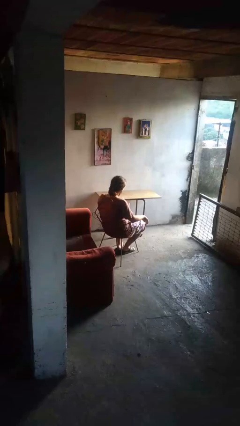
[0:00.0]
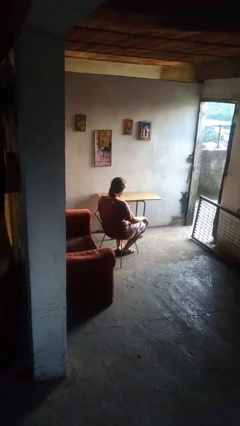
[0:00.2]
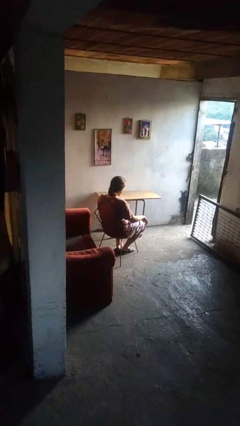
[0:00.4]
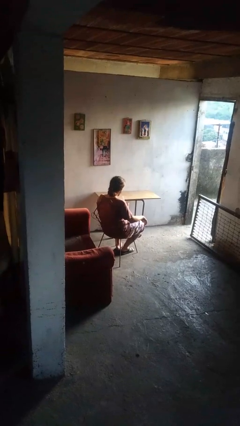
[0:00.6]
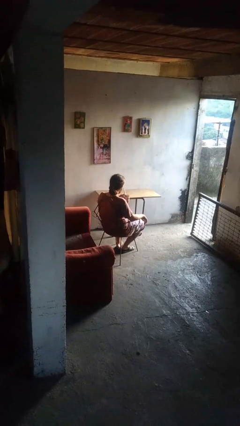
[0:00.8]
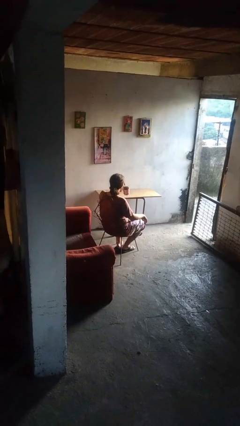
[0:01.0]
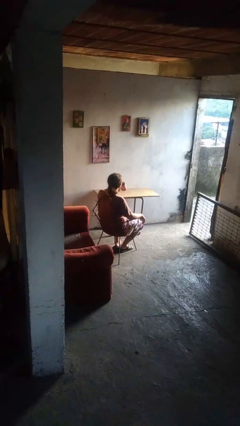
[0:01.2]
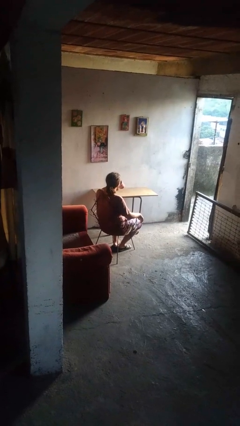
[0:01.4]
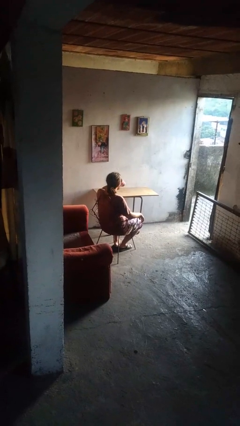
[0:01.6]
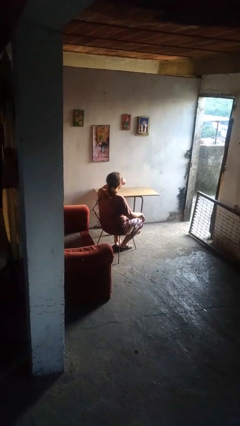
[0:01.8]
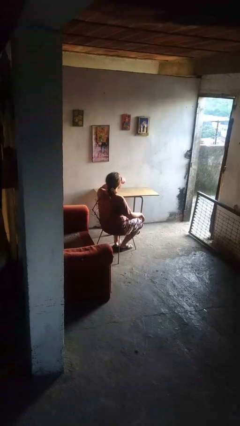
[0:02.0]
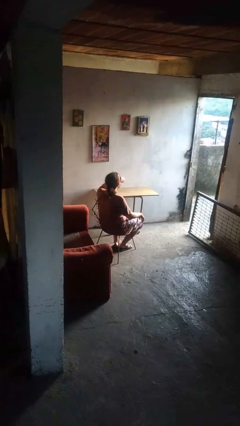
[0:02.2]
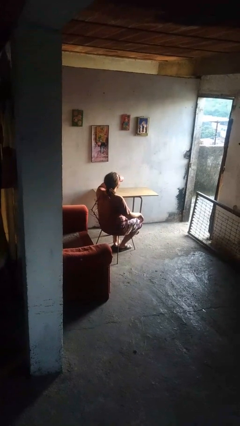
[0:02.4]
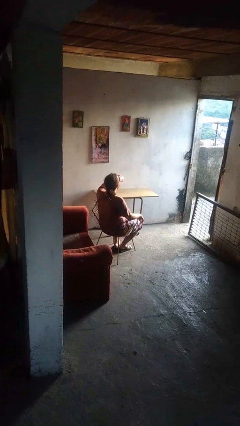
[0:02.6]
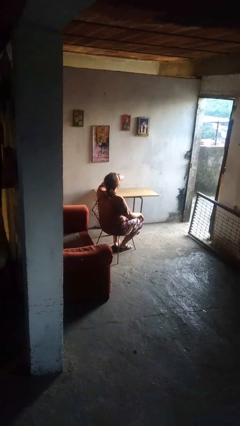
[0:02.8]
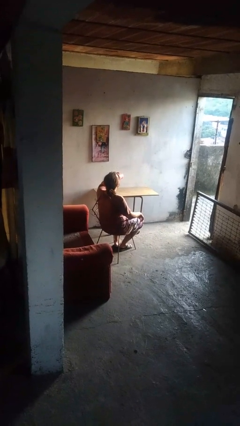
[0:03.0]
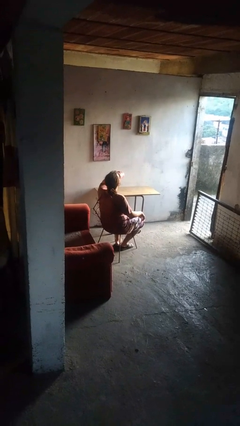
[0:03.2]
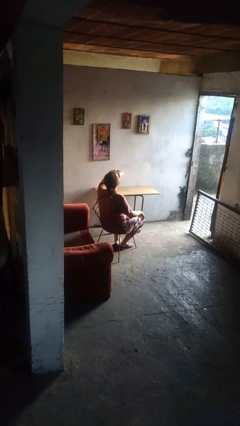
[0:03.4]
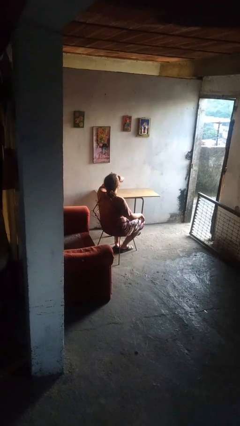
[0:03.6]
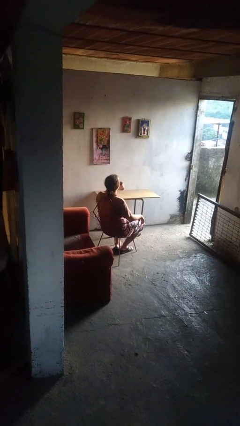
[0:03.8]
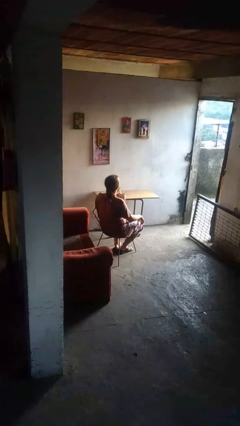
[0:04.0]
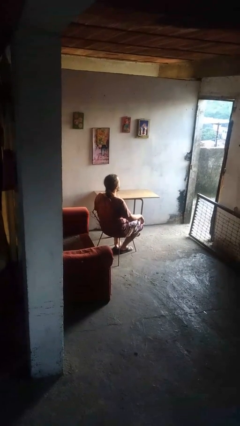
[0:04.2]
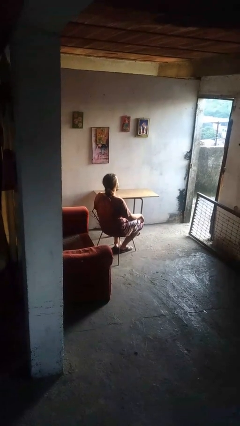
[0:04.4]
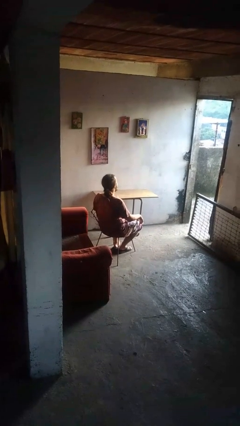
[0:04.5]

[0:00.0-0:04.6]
person drinks from mug

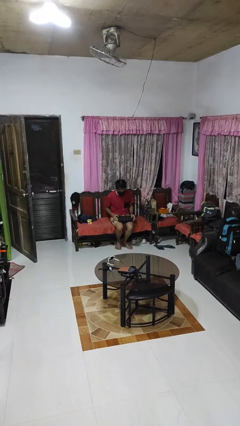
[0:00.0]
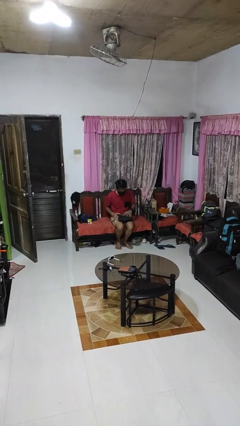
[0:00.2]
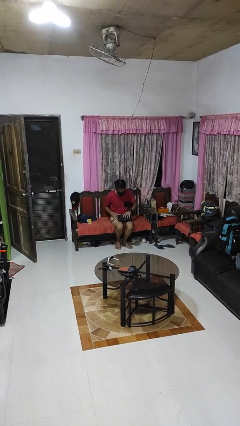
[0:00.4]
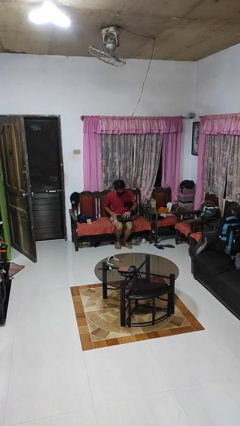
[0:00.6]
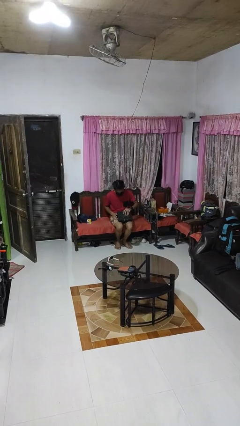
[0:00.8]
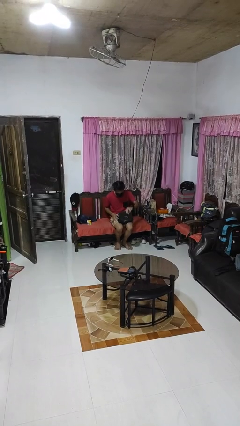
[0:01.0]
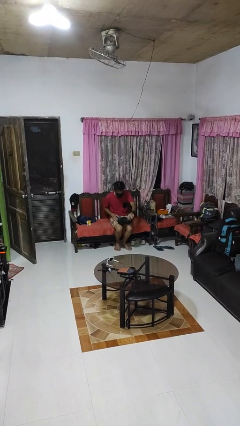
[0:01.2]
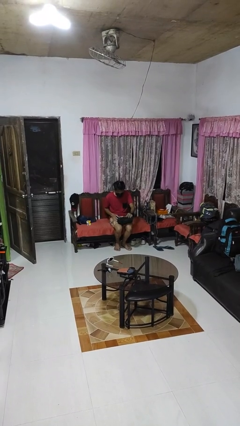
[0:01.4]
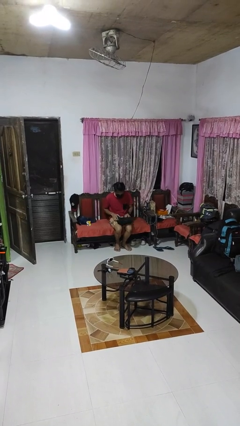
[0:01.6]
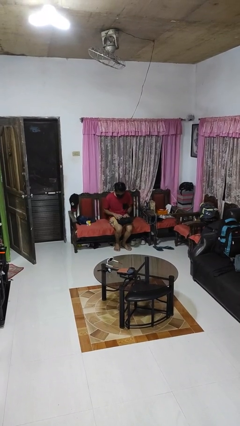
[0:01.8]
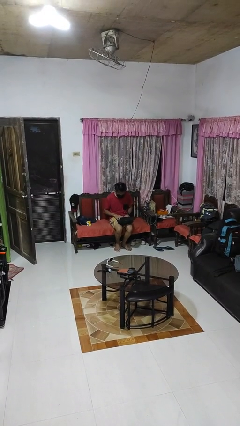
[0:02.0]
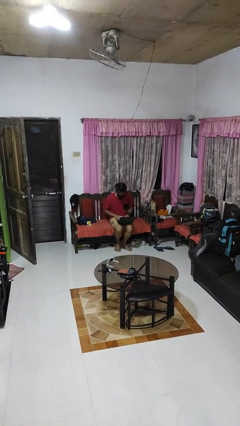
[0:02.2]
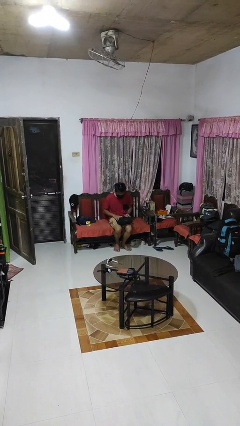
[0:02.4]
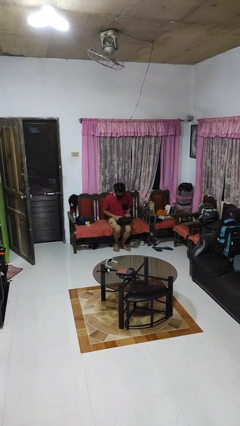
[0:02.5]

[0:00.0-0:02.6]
person opens laptop

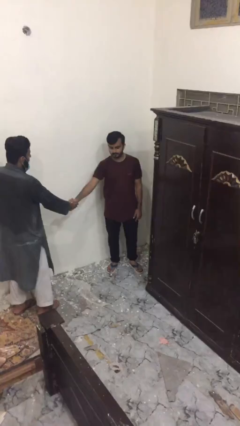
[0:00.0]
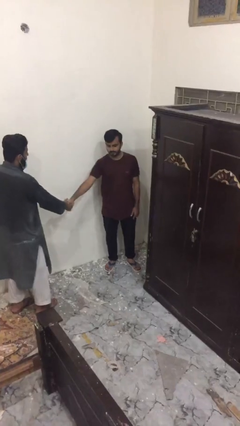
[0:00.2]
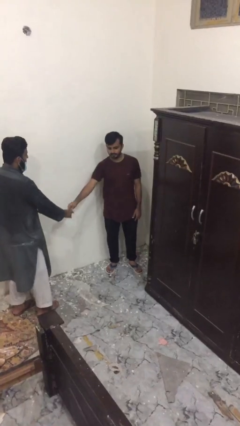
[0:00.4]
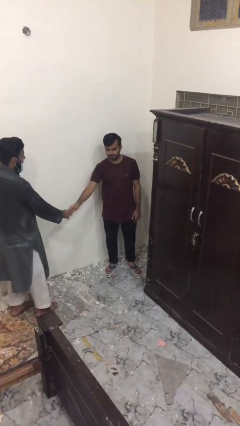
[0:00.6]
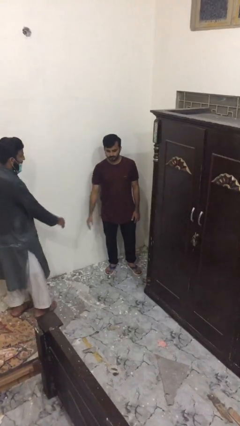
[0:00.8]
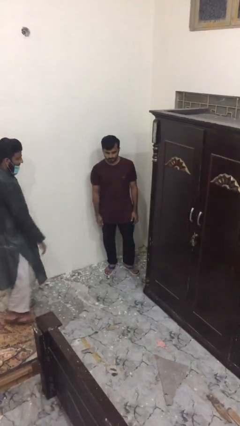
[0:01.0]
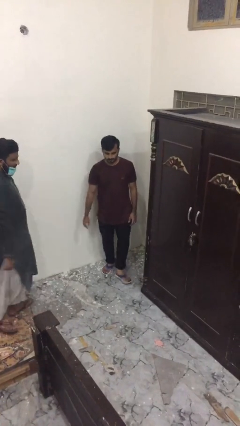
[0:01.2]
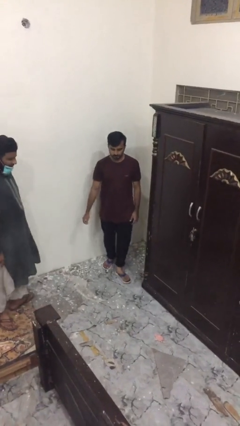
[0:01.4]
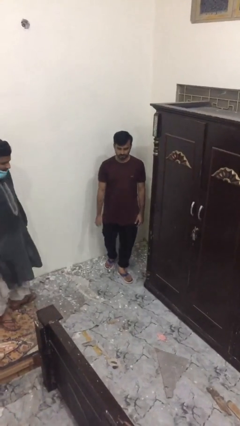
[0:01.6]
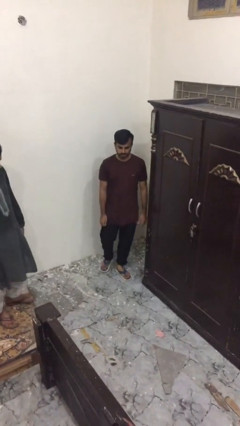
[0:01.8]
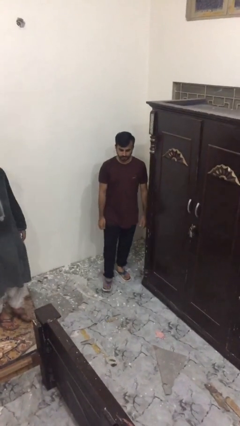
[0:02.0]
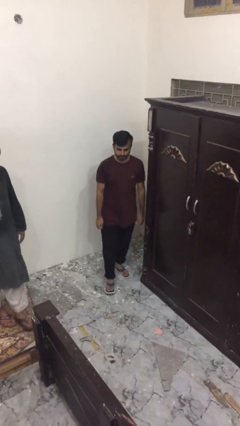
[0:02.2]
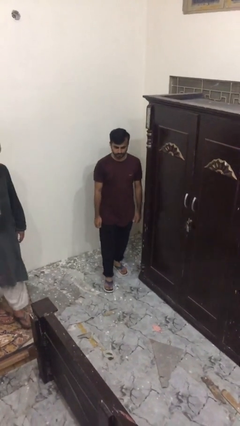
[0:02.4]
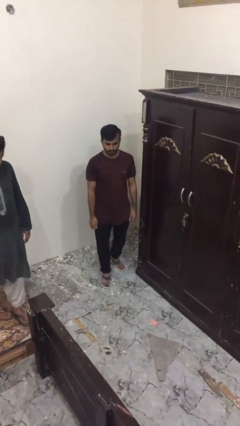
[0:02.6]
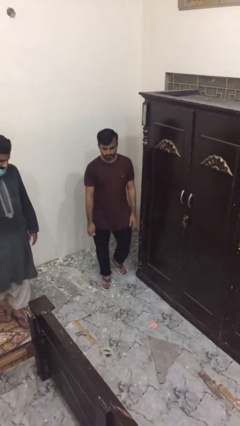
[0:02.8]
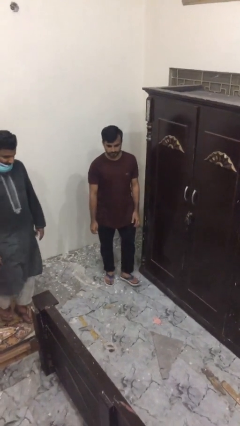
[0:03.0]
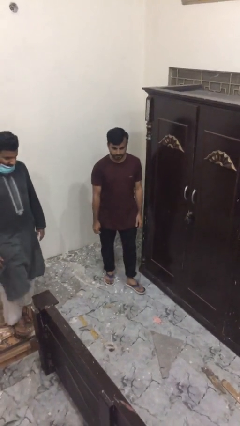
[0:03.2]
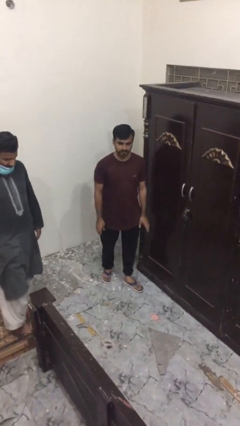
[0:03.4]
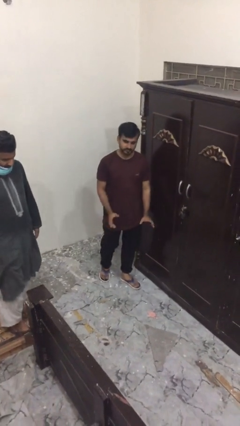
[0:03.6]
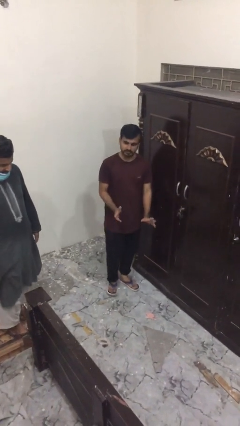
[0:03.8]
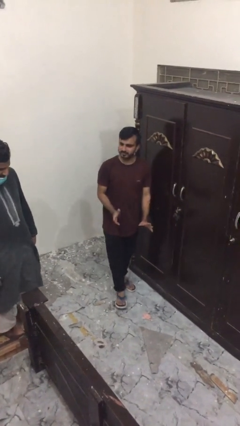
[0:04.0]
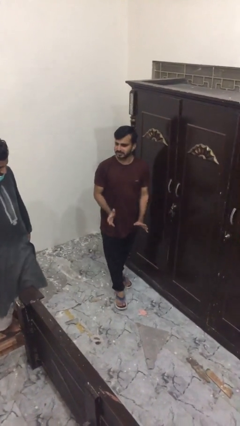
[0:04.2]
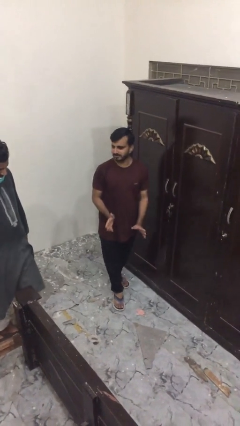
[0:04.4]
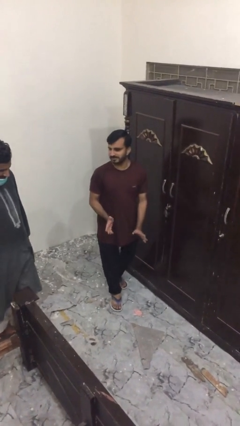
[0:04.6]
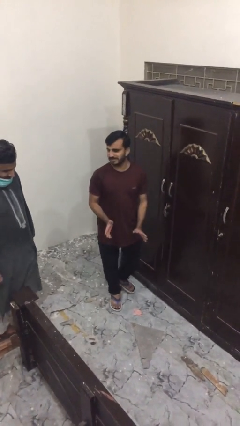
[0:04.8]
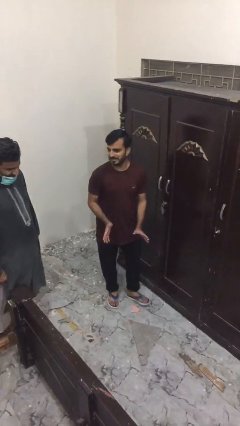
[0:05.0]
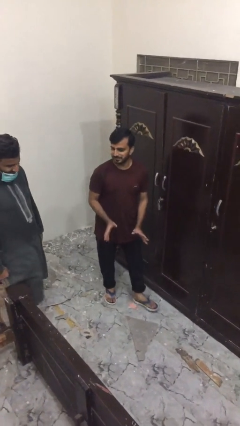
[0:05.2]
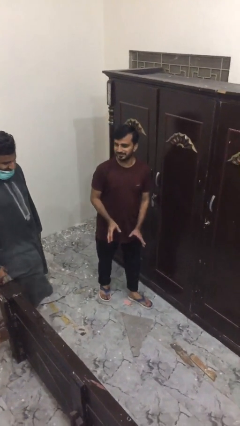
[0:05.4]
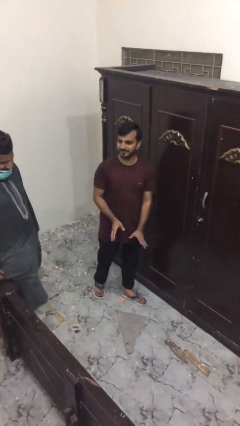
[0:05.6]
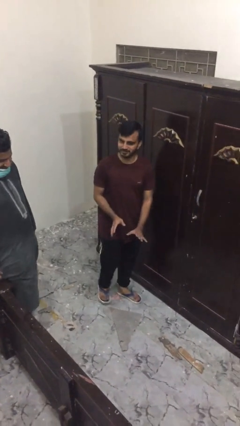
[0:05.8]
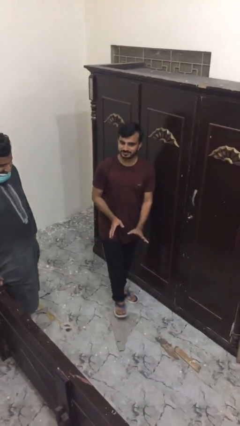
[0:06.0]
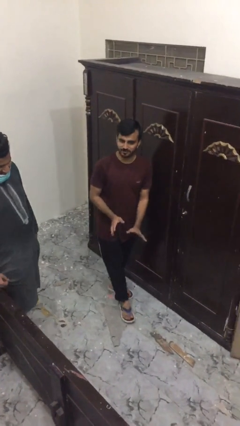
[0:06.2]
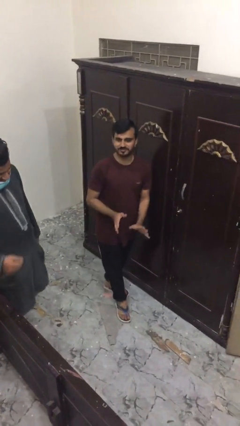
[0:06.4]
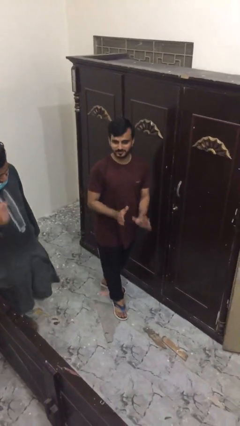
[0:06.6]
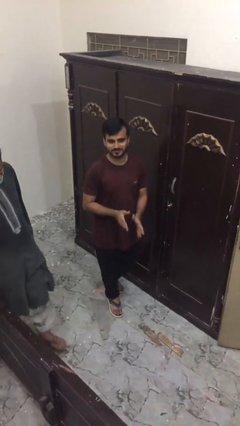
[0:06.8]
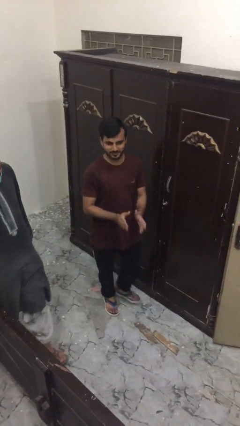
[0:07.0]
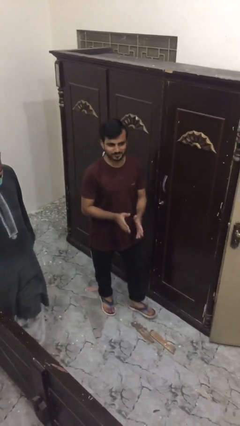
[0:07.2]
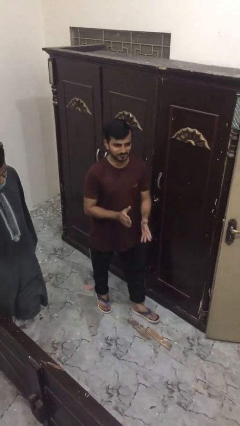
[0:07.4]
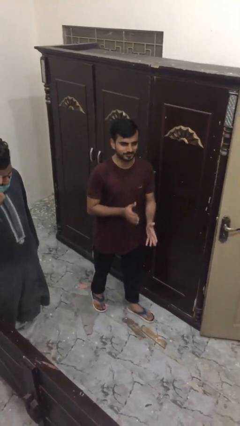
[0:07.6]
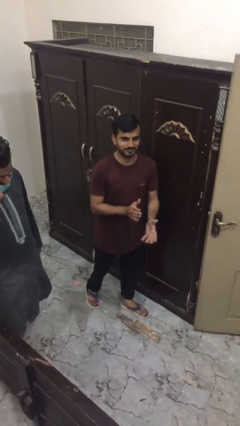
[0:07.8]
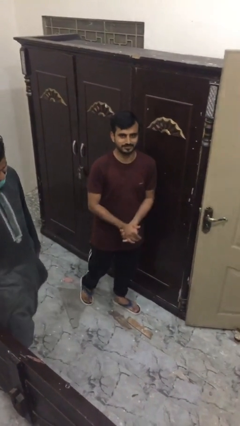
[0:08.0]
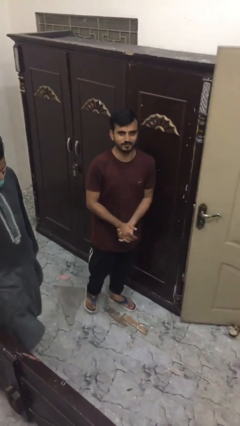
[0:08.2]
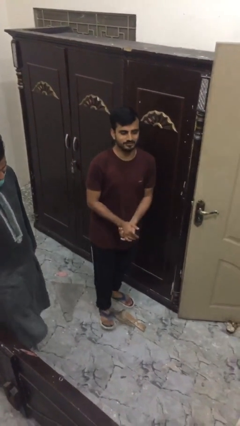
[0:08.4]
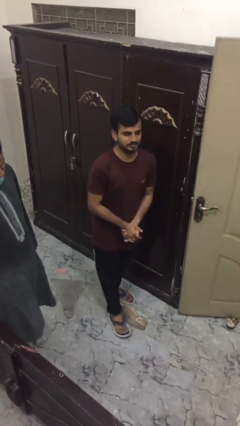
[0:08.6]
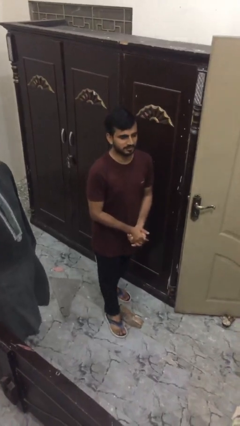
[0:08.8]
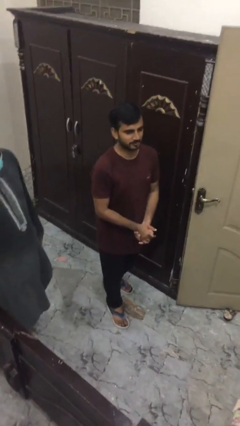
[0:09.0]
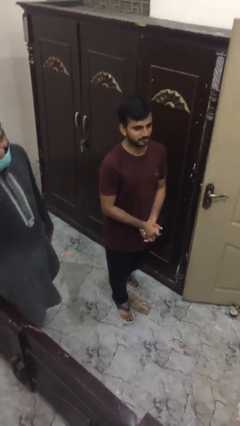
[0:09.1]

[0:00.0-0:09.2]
person talks to person

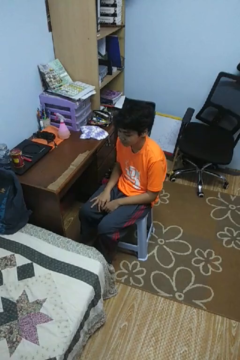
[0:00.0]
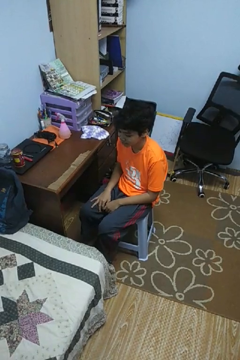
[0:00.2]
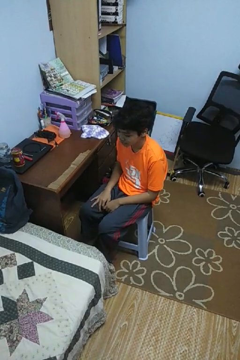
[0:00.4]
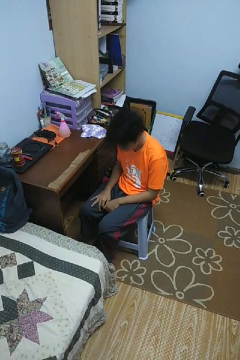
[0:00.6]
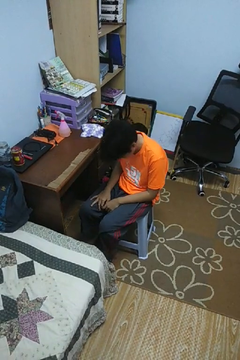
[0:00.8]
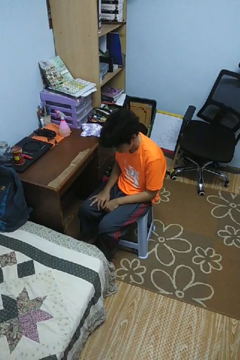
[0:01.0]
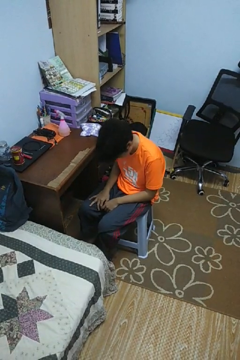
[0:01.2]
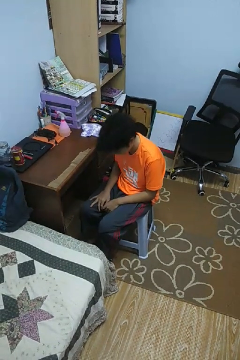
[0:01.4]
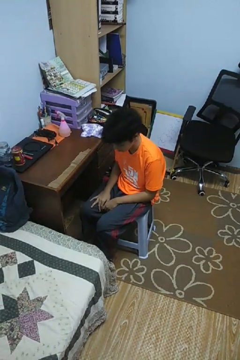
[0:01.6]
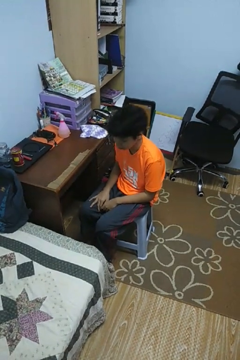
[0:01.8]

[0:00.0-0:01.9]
person nods head
